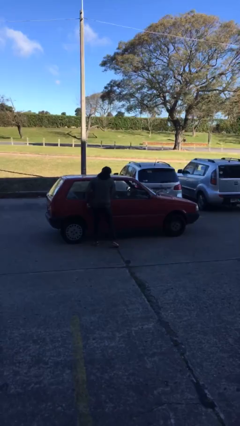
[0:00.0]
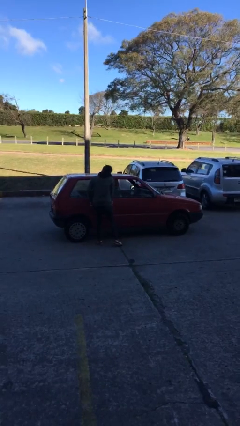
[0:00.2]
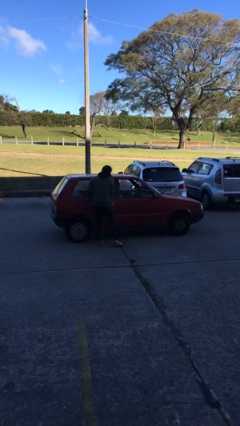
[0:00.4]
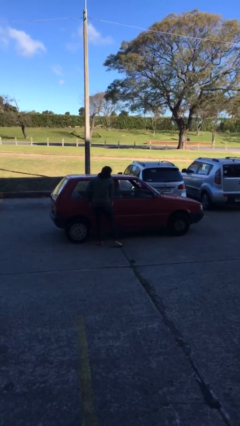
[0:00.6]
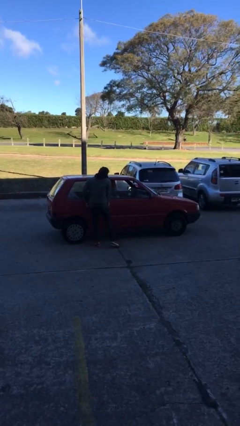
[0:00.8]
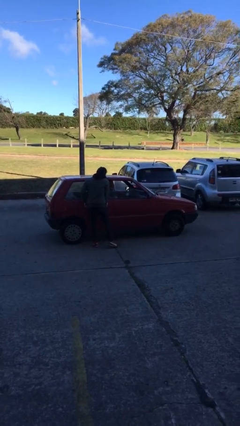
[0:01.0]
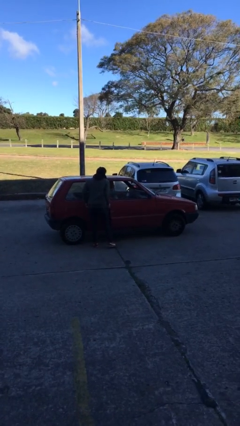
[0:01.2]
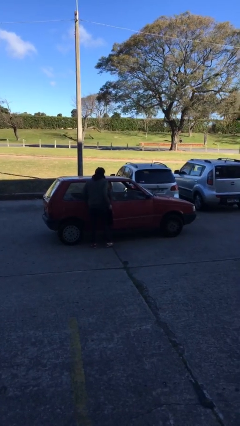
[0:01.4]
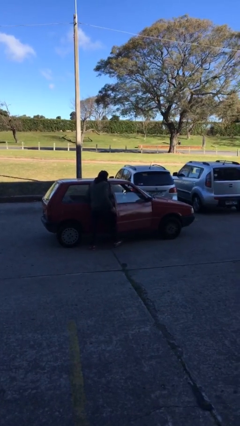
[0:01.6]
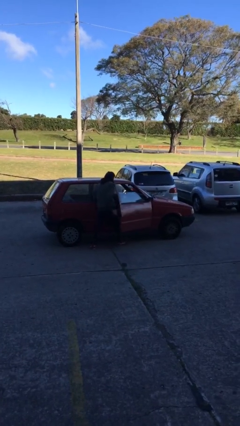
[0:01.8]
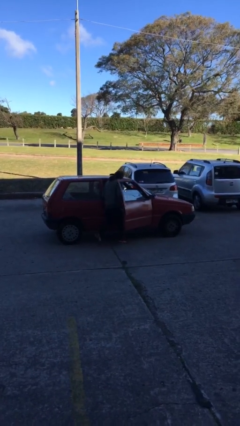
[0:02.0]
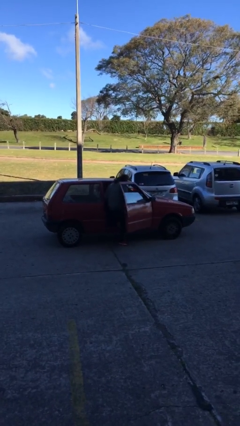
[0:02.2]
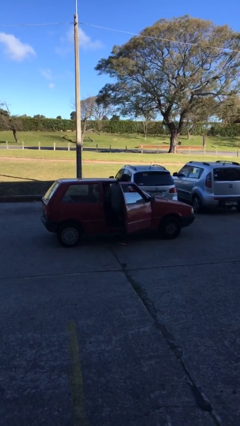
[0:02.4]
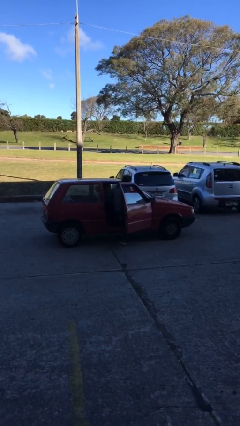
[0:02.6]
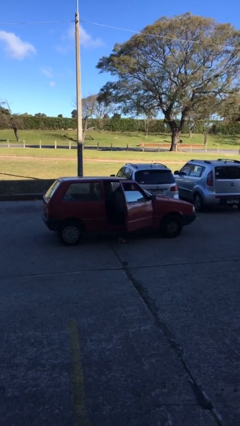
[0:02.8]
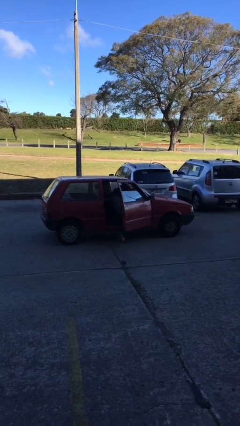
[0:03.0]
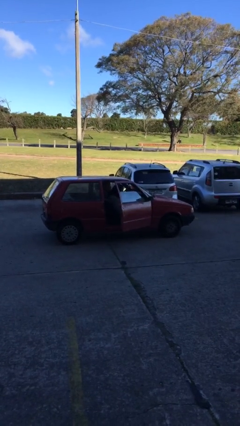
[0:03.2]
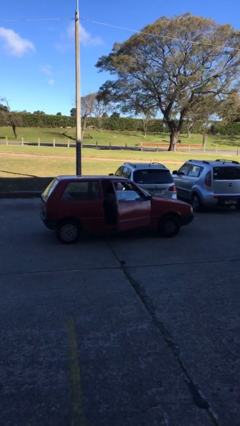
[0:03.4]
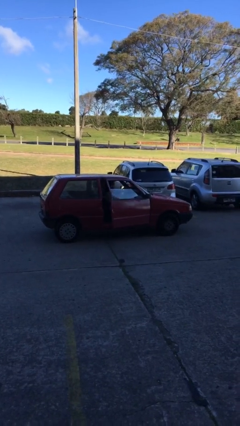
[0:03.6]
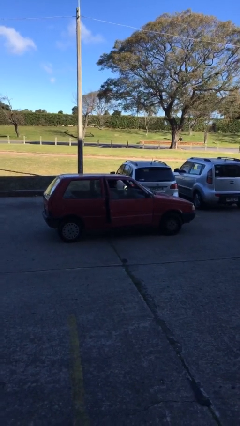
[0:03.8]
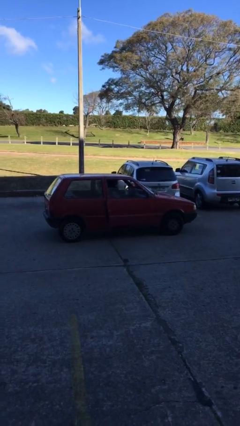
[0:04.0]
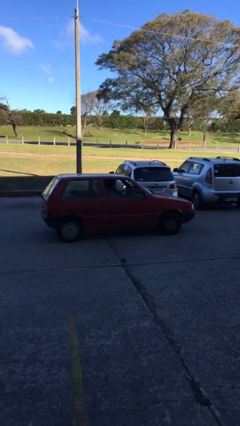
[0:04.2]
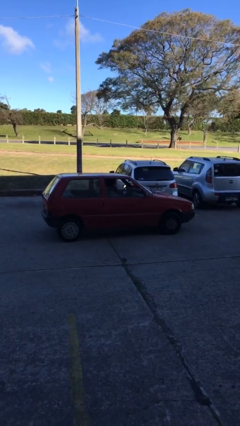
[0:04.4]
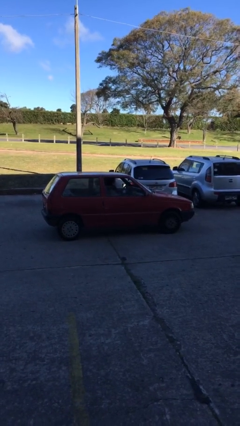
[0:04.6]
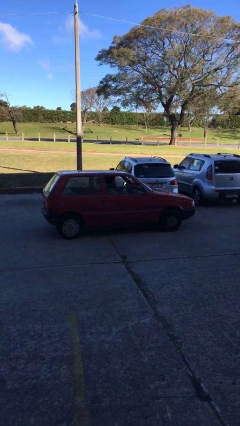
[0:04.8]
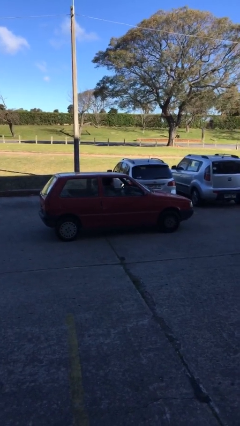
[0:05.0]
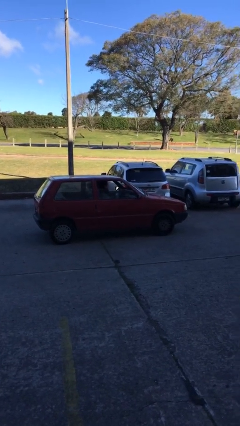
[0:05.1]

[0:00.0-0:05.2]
car picks up person

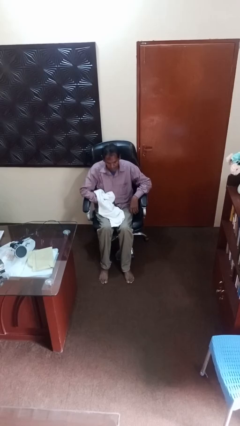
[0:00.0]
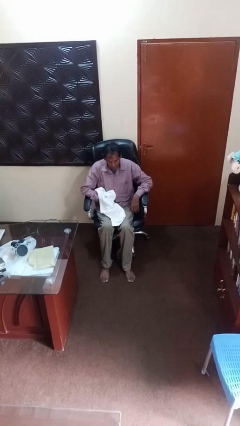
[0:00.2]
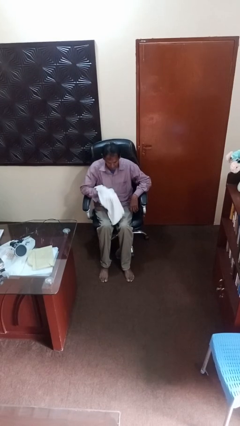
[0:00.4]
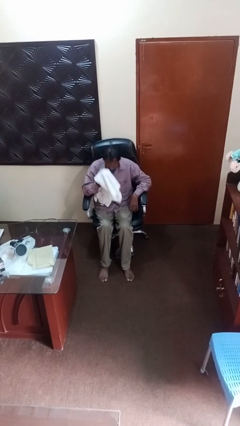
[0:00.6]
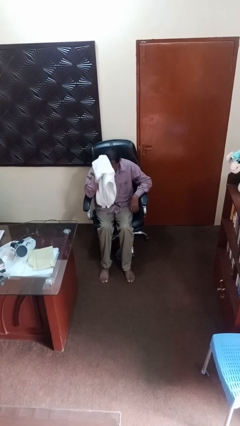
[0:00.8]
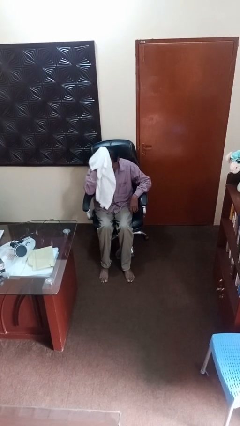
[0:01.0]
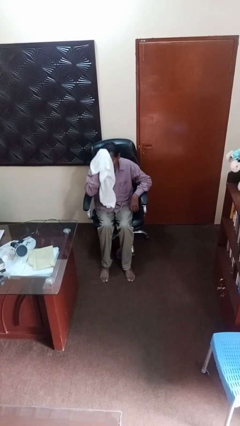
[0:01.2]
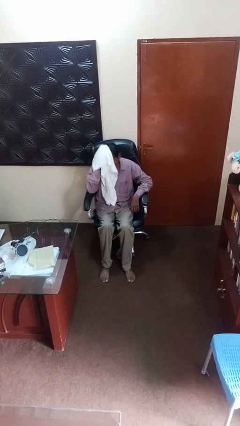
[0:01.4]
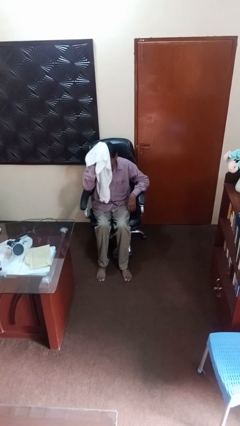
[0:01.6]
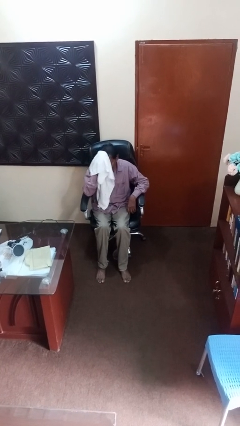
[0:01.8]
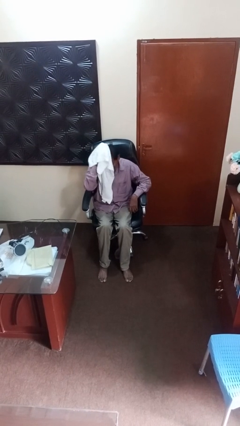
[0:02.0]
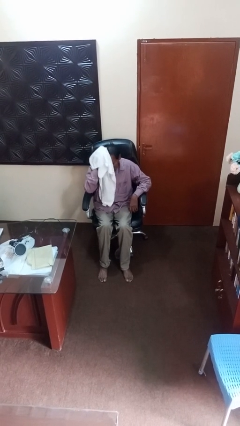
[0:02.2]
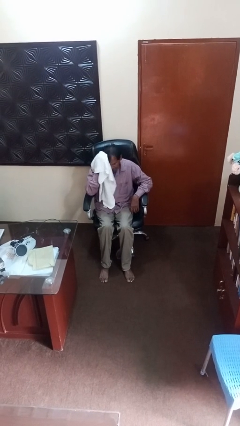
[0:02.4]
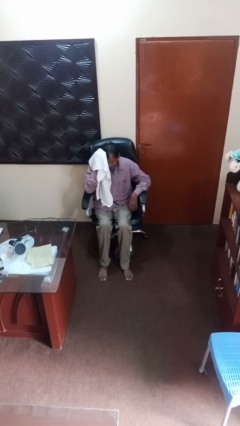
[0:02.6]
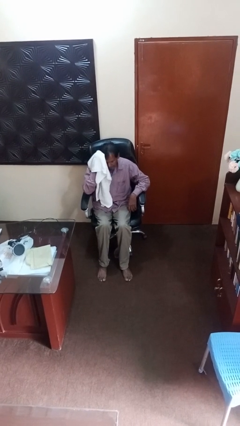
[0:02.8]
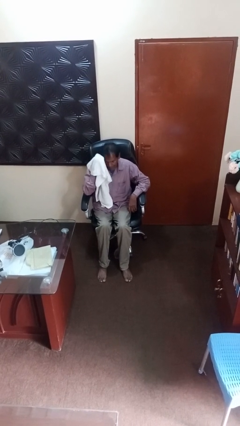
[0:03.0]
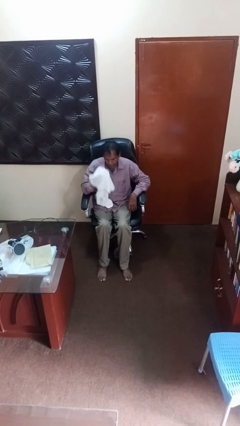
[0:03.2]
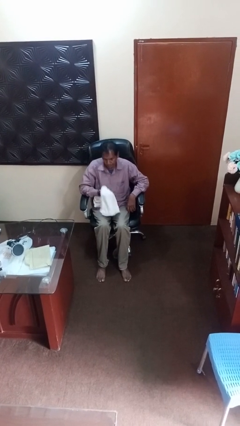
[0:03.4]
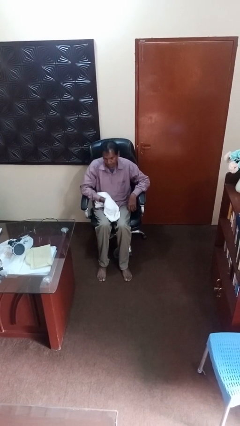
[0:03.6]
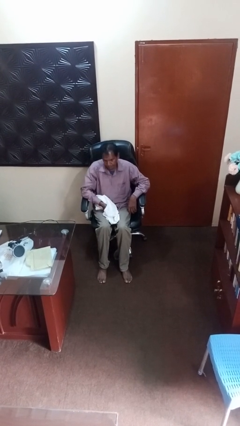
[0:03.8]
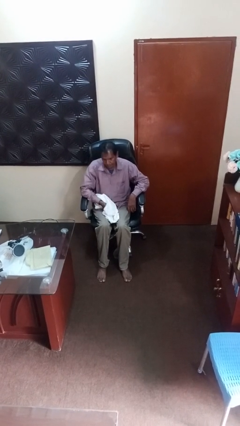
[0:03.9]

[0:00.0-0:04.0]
person dries hair with towel

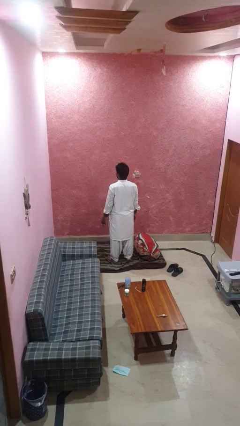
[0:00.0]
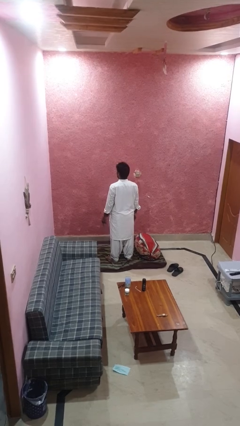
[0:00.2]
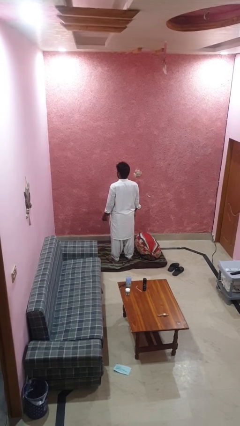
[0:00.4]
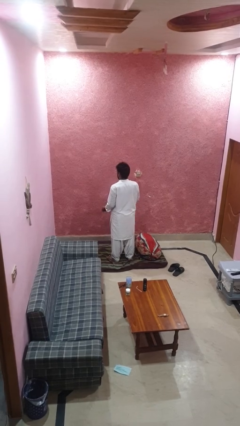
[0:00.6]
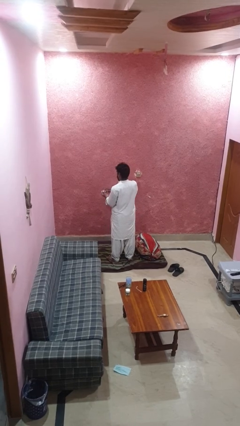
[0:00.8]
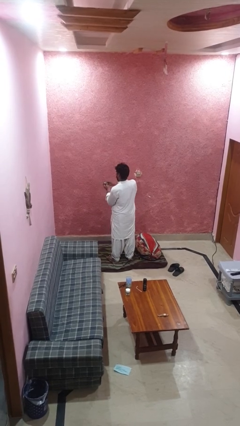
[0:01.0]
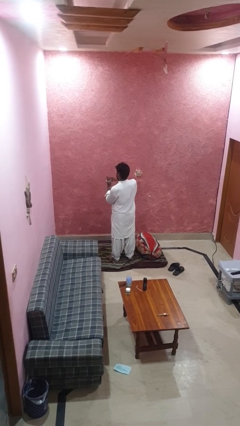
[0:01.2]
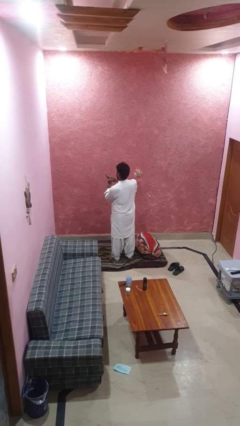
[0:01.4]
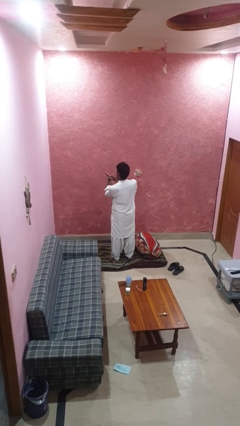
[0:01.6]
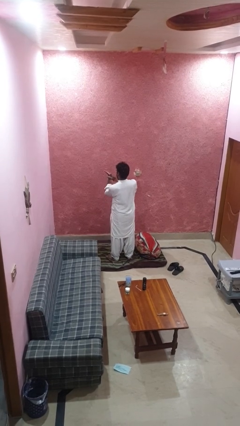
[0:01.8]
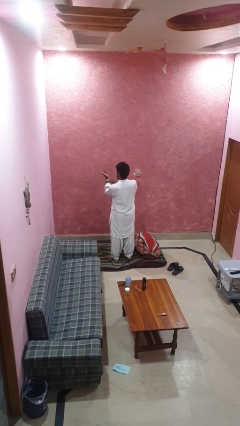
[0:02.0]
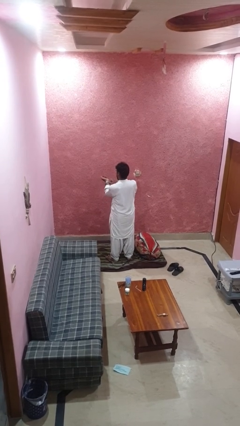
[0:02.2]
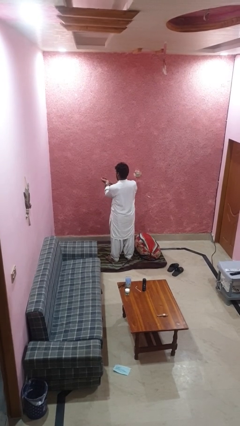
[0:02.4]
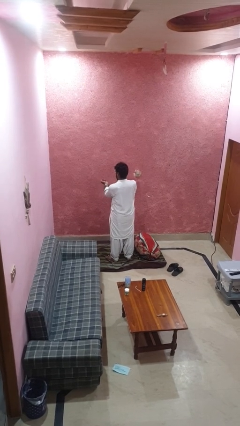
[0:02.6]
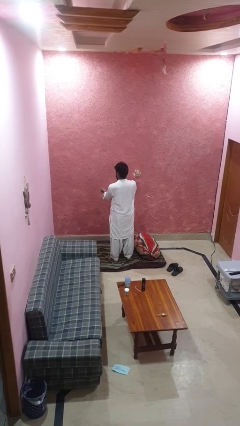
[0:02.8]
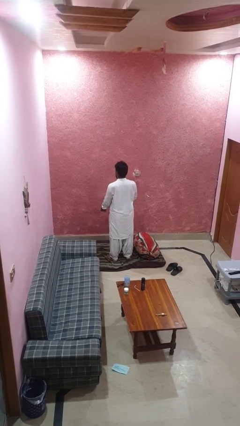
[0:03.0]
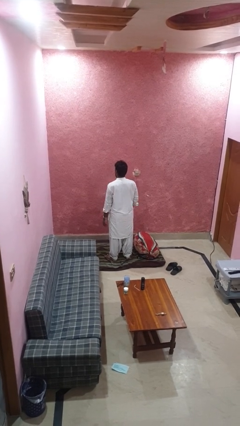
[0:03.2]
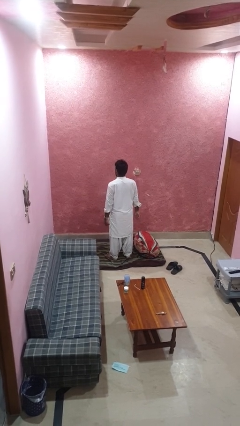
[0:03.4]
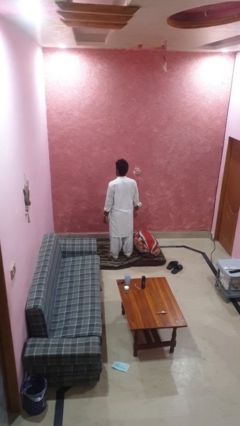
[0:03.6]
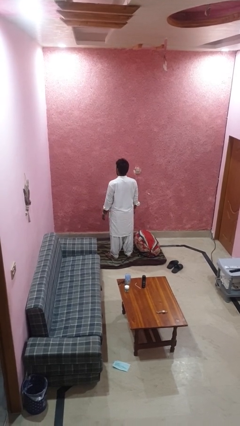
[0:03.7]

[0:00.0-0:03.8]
person puts on wristwatch

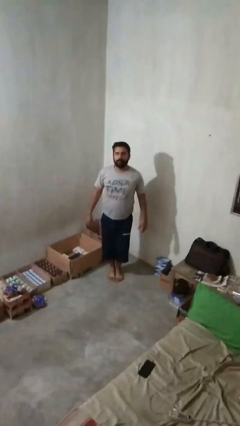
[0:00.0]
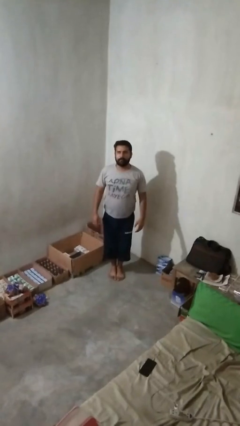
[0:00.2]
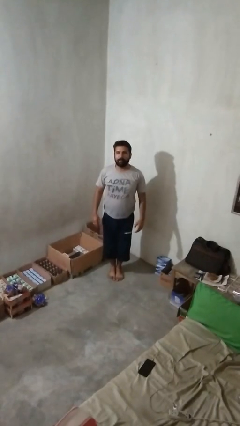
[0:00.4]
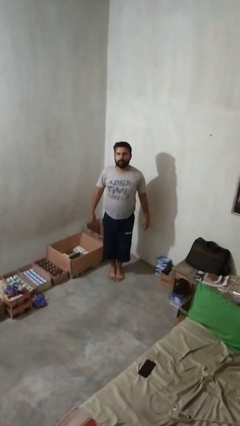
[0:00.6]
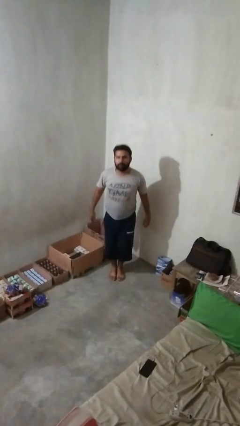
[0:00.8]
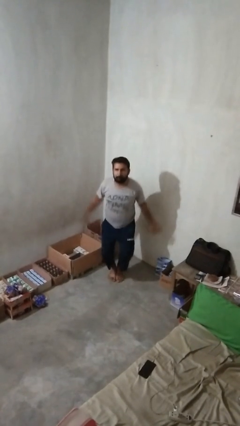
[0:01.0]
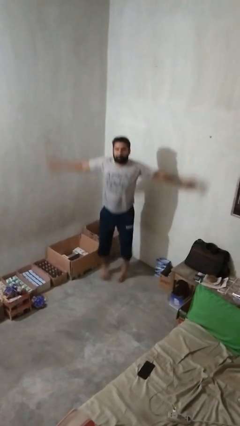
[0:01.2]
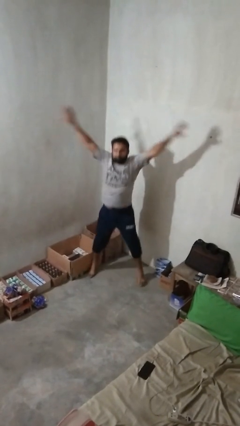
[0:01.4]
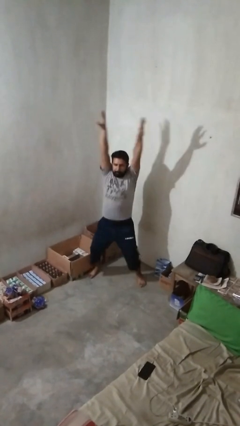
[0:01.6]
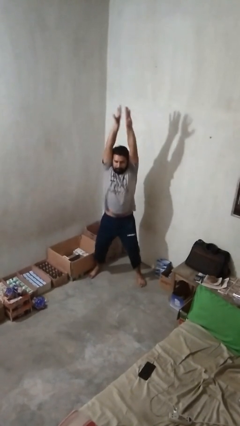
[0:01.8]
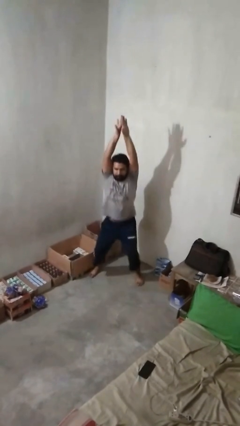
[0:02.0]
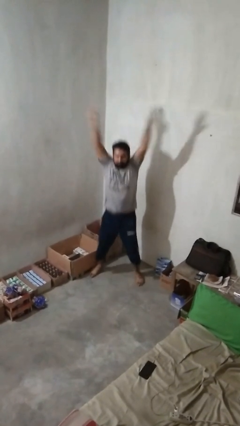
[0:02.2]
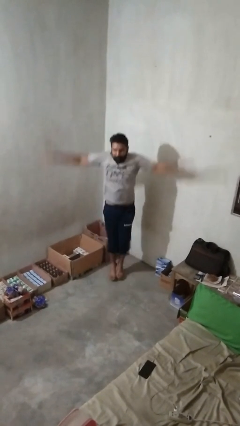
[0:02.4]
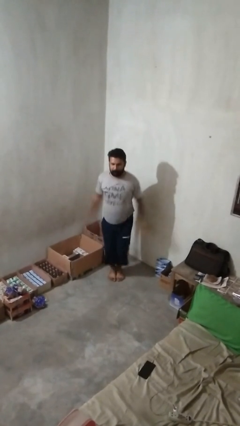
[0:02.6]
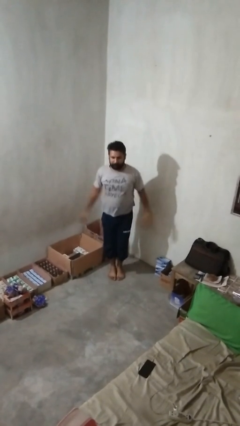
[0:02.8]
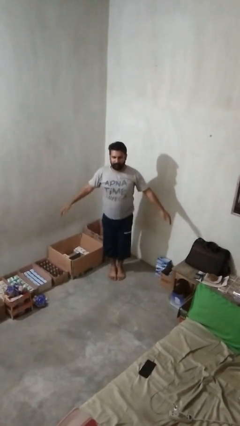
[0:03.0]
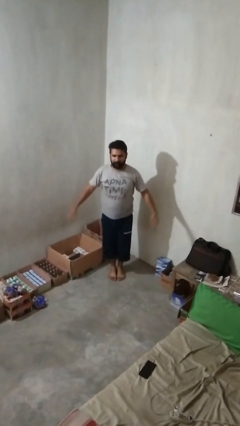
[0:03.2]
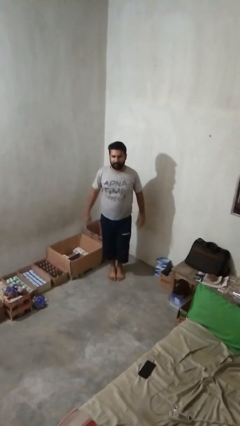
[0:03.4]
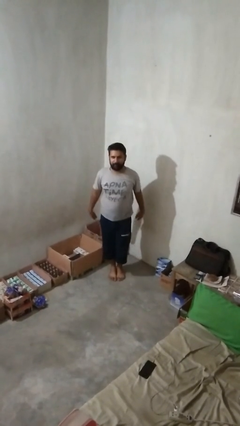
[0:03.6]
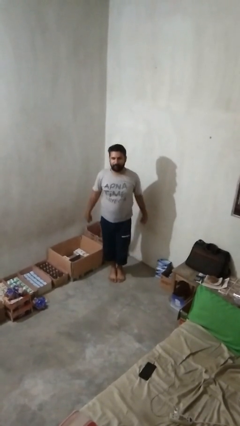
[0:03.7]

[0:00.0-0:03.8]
person exercises with jumping jacks

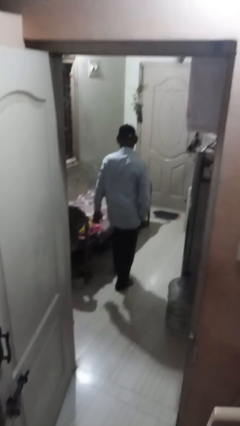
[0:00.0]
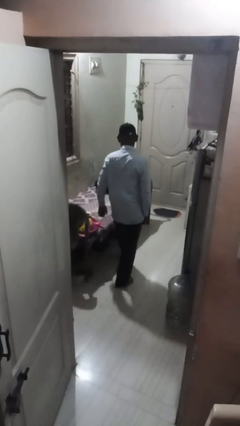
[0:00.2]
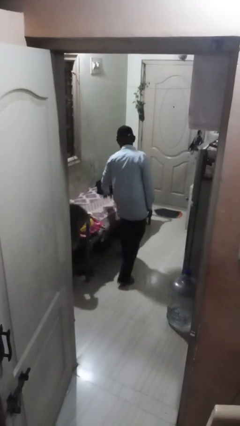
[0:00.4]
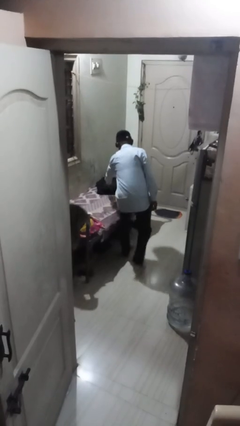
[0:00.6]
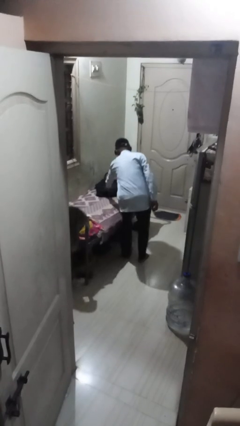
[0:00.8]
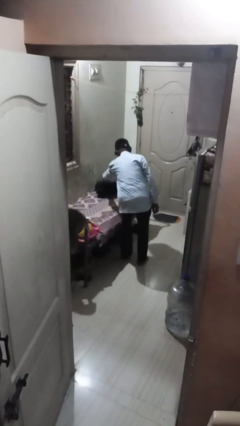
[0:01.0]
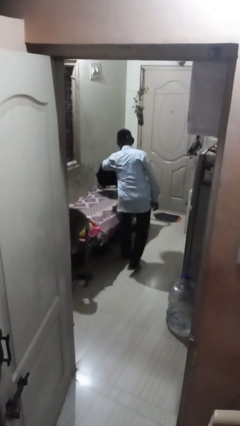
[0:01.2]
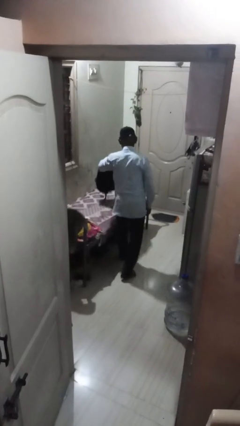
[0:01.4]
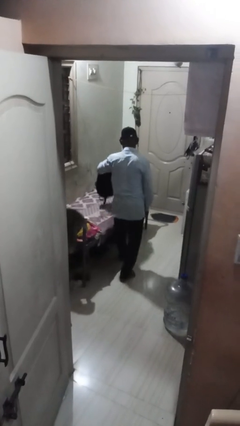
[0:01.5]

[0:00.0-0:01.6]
person picks up object from bed
